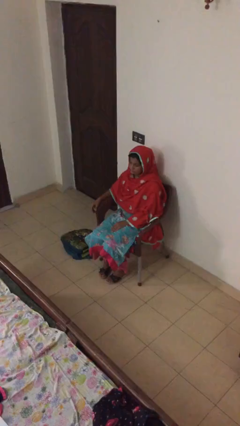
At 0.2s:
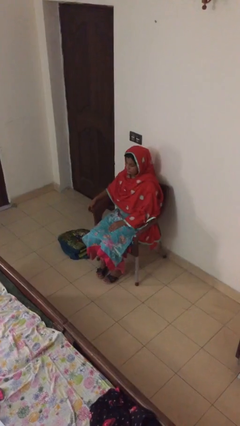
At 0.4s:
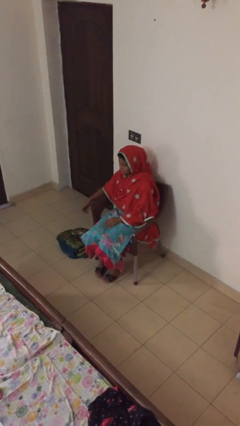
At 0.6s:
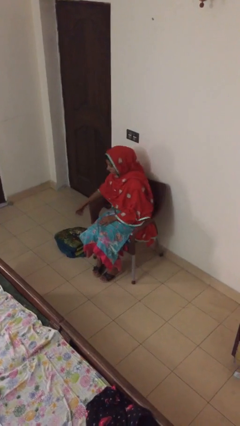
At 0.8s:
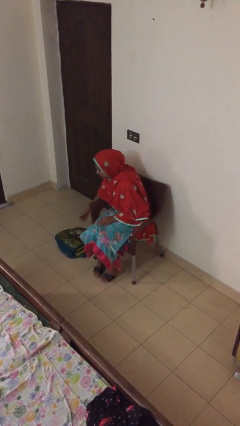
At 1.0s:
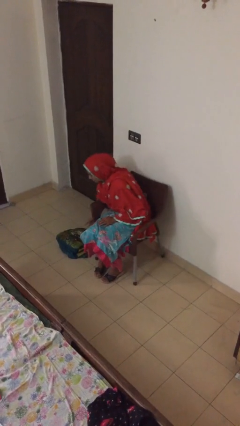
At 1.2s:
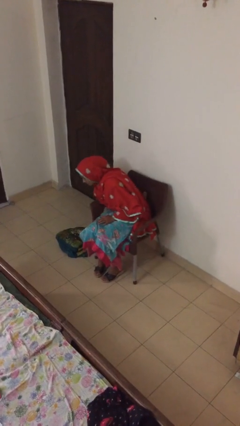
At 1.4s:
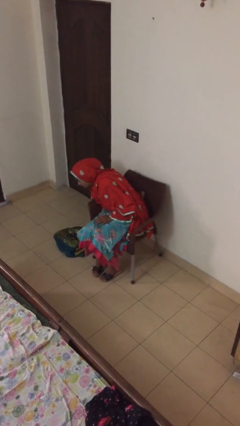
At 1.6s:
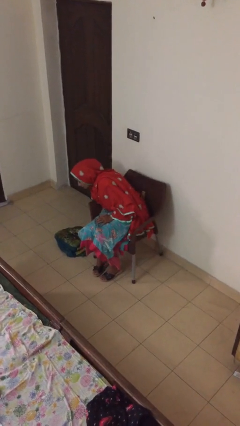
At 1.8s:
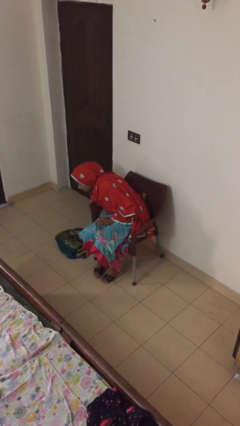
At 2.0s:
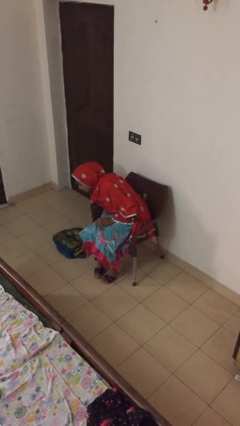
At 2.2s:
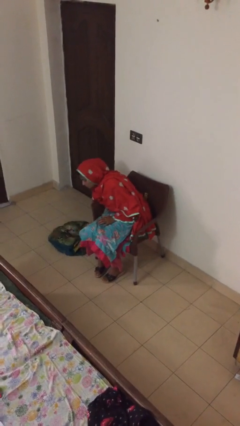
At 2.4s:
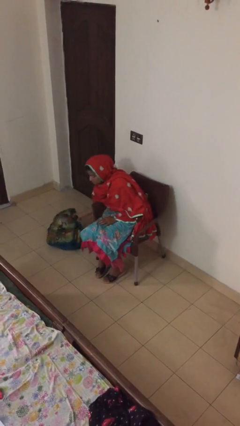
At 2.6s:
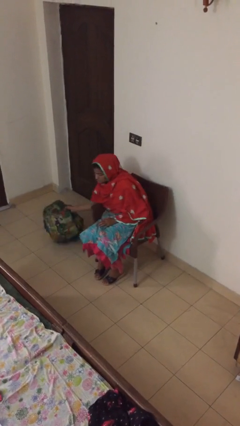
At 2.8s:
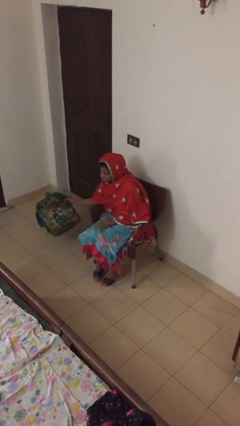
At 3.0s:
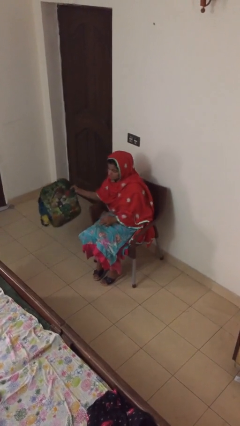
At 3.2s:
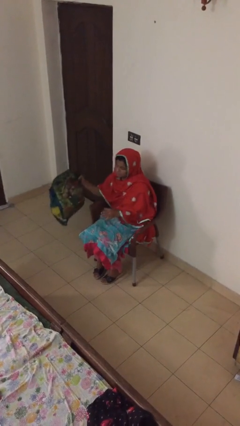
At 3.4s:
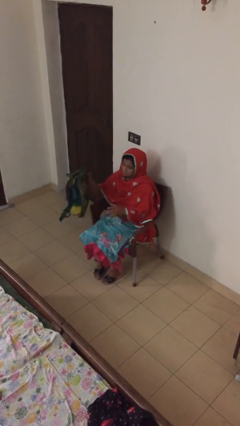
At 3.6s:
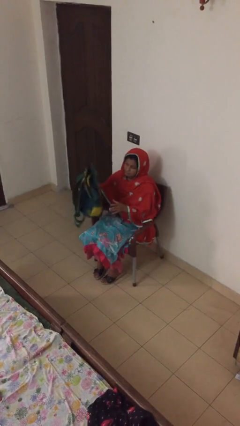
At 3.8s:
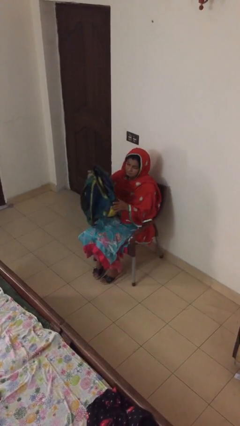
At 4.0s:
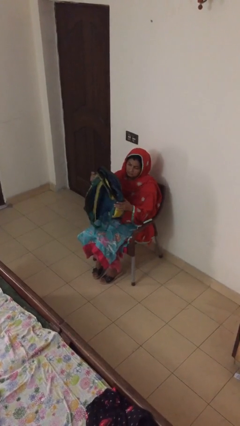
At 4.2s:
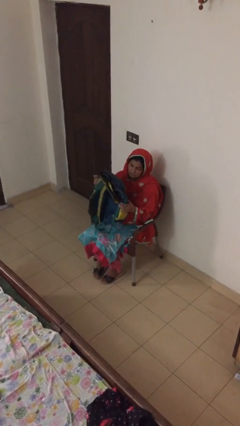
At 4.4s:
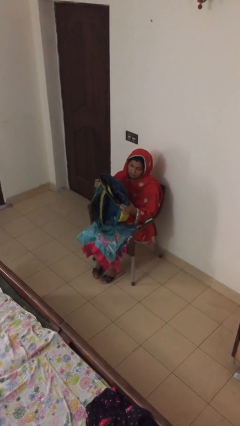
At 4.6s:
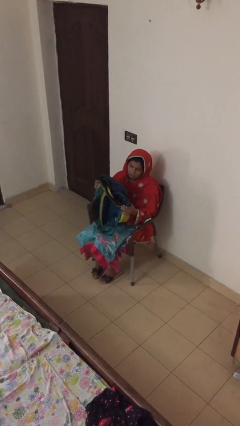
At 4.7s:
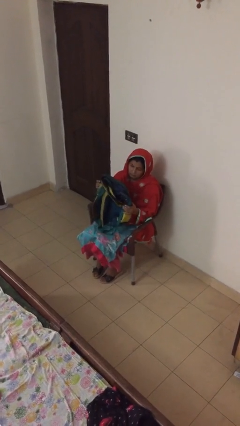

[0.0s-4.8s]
person picks up object from floor

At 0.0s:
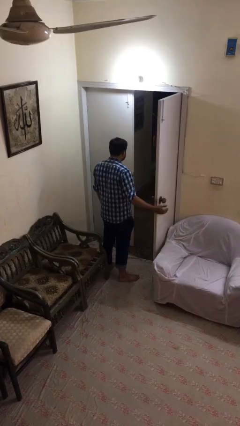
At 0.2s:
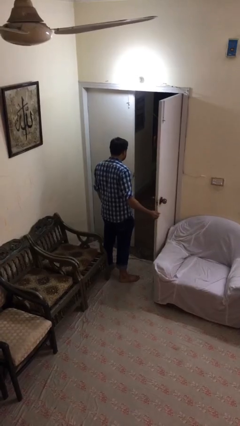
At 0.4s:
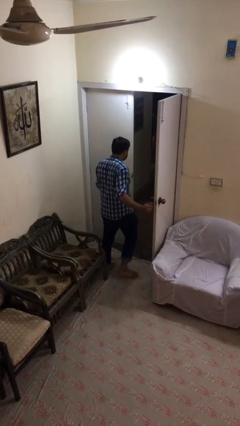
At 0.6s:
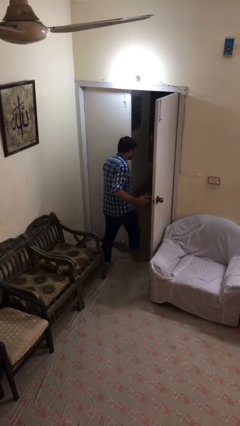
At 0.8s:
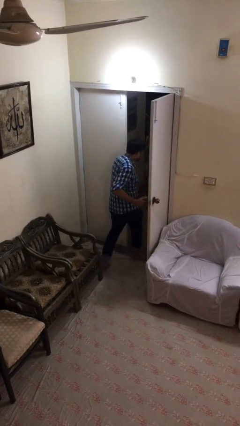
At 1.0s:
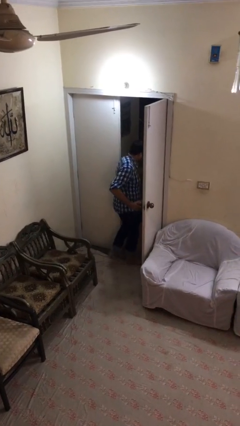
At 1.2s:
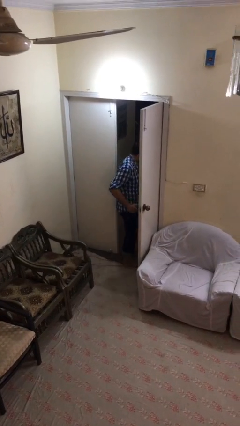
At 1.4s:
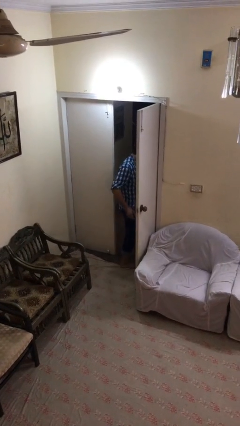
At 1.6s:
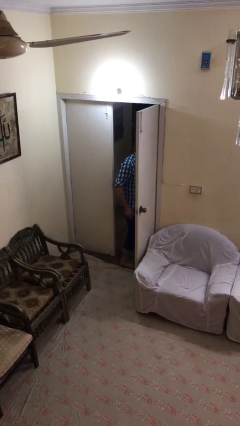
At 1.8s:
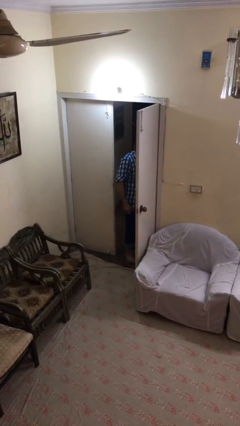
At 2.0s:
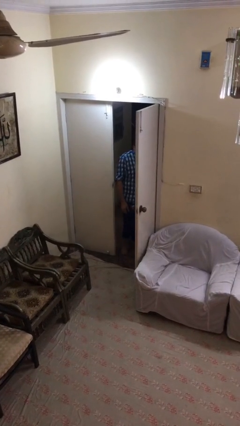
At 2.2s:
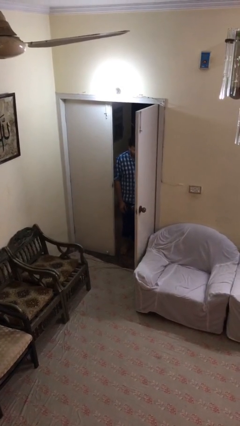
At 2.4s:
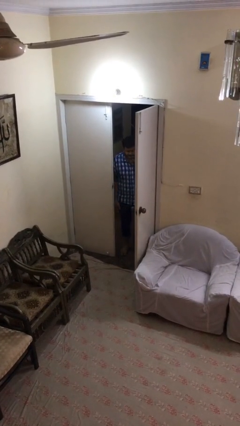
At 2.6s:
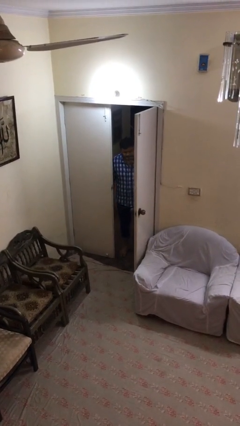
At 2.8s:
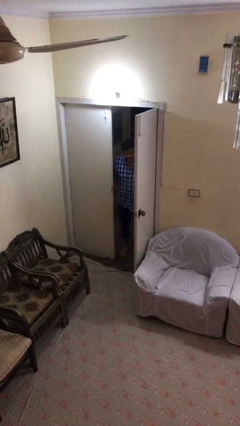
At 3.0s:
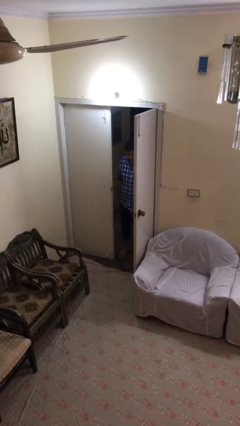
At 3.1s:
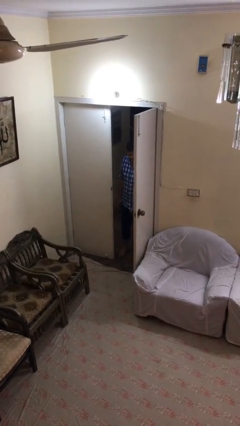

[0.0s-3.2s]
person exits scene through structure

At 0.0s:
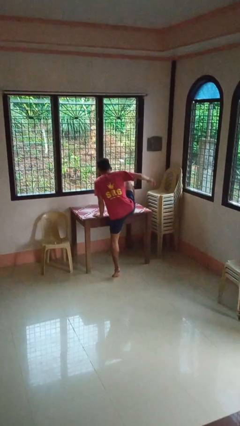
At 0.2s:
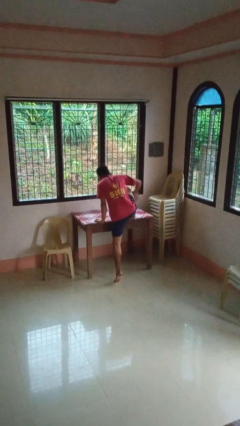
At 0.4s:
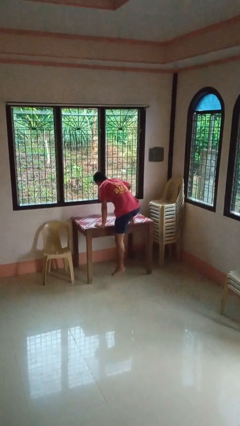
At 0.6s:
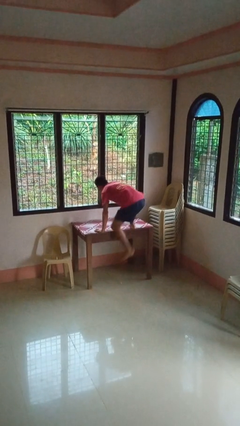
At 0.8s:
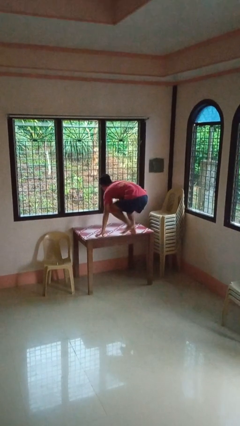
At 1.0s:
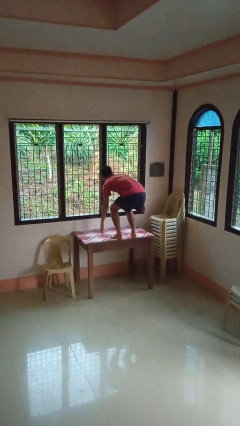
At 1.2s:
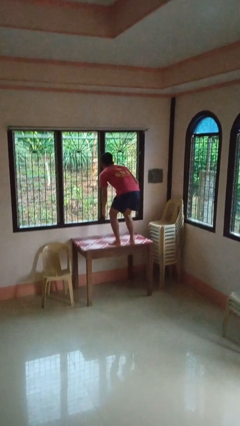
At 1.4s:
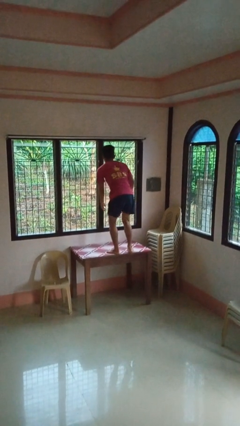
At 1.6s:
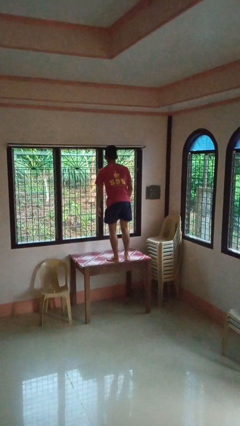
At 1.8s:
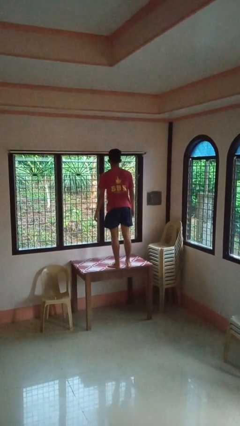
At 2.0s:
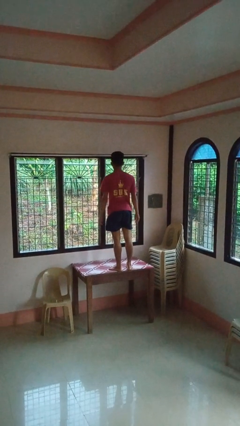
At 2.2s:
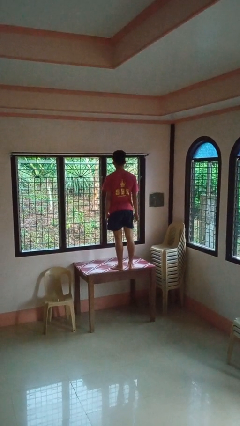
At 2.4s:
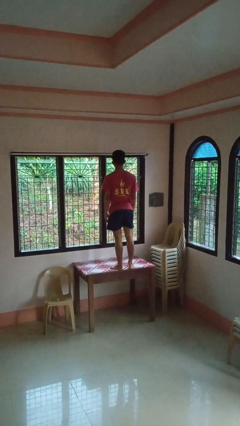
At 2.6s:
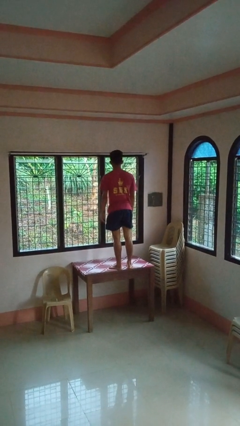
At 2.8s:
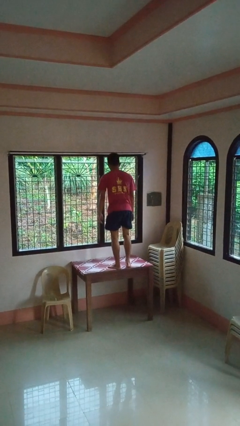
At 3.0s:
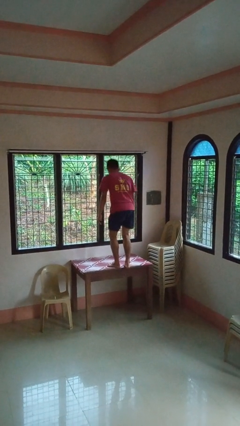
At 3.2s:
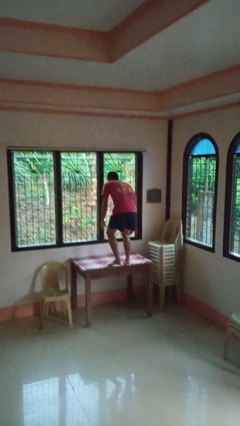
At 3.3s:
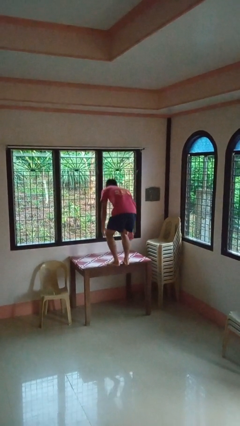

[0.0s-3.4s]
person climbs on table

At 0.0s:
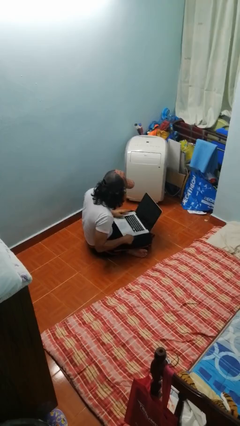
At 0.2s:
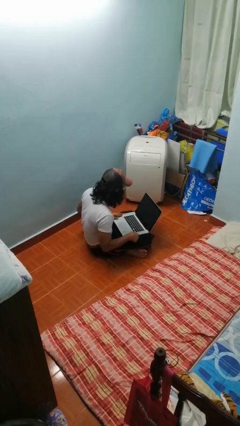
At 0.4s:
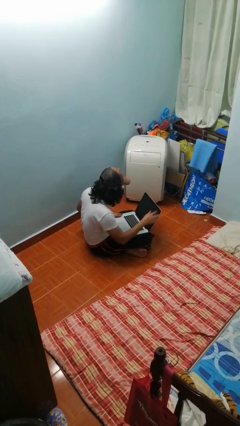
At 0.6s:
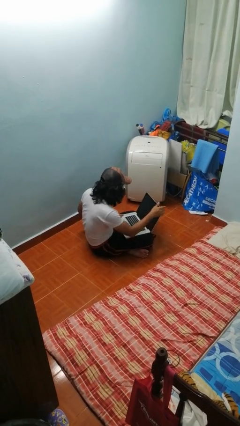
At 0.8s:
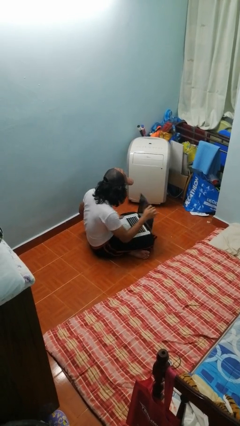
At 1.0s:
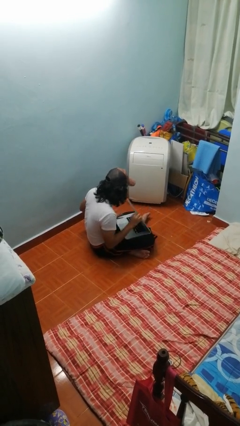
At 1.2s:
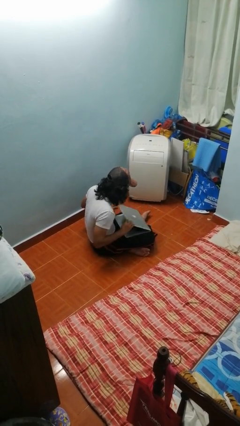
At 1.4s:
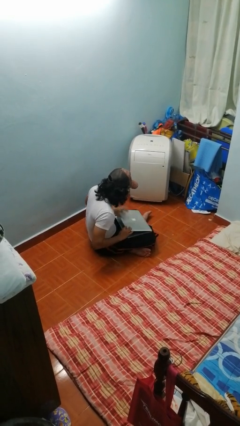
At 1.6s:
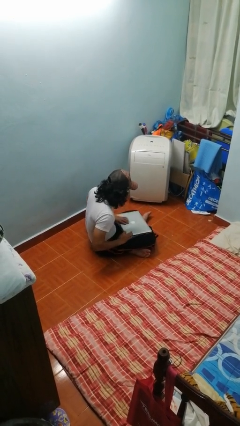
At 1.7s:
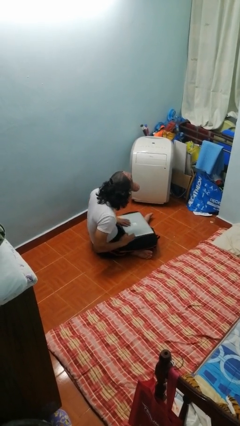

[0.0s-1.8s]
person closes laptop

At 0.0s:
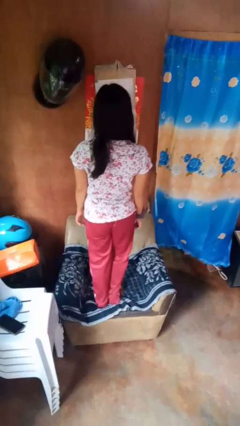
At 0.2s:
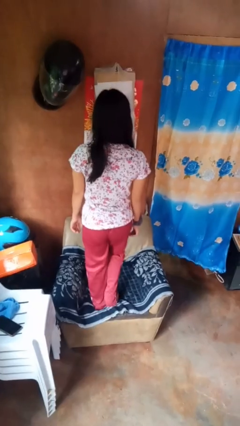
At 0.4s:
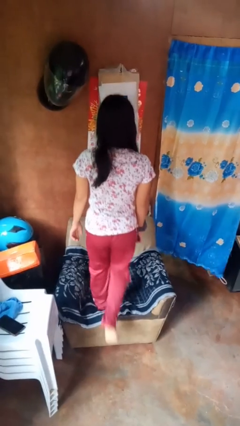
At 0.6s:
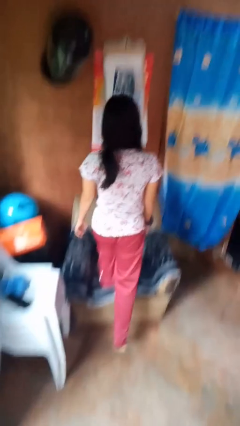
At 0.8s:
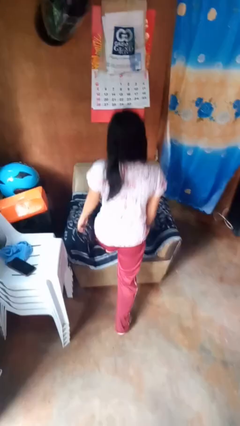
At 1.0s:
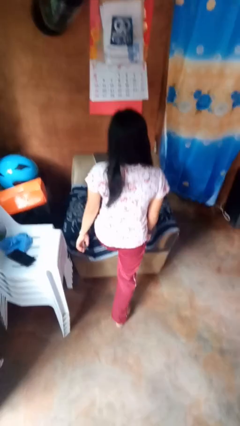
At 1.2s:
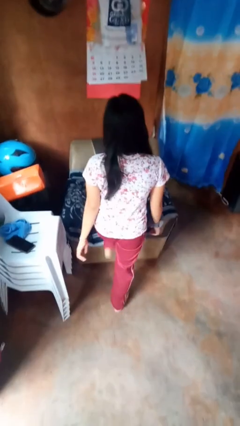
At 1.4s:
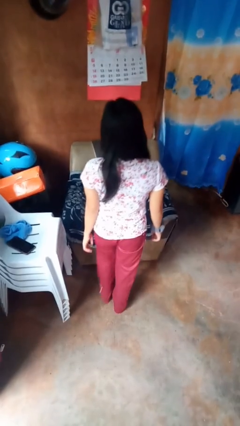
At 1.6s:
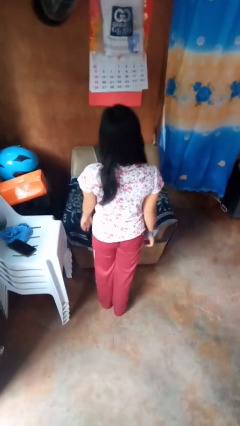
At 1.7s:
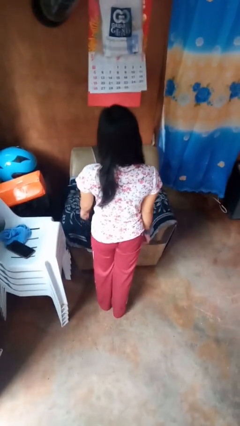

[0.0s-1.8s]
person climbs off couch

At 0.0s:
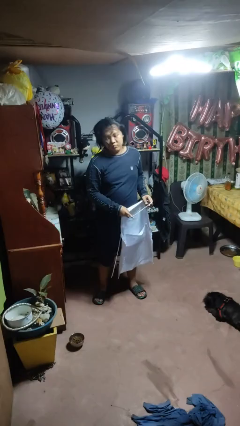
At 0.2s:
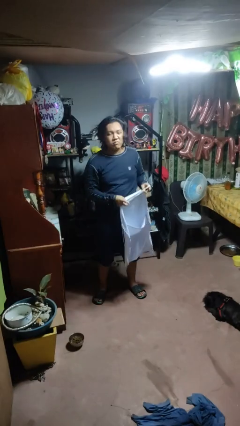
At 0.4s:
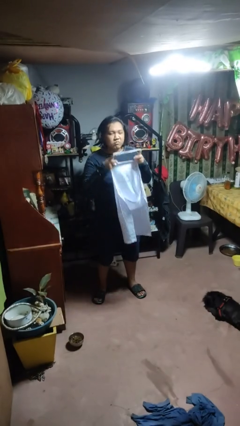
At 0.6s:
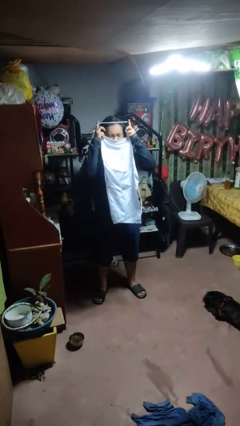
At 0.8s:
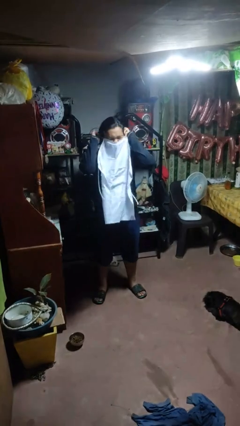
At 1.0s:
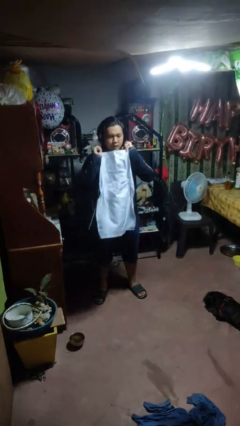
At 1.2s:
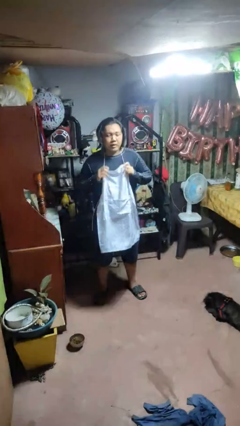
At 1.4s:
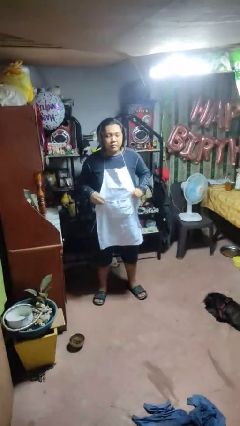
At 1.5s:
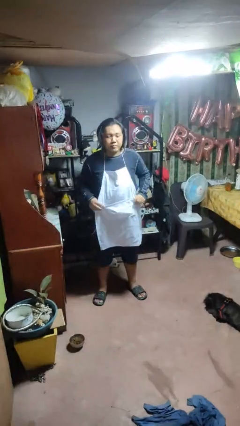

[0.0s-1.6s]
person puts on apron

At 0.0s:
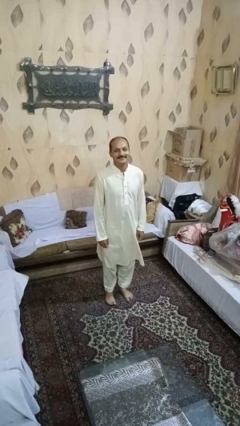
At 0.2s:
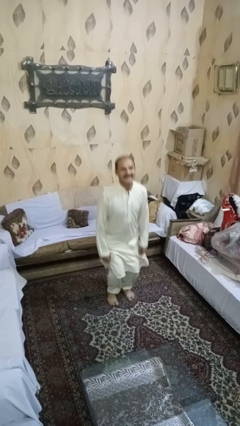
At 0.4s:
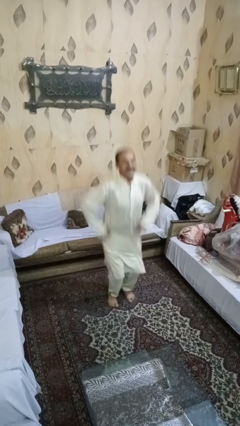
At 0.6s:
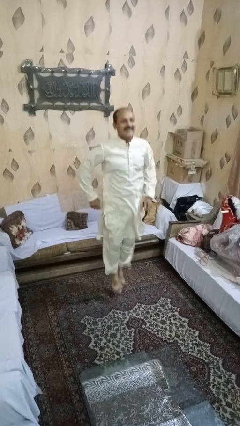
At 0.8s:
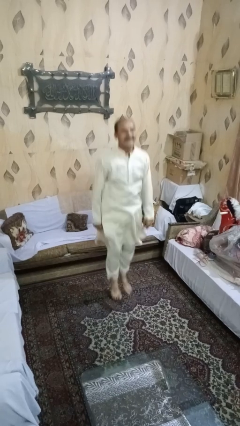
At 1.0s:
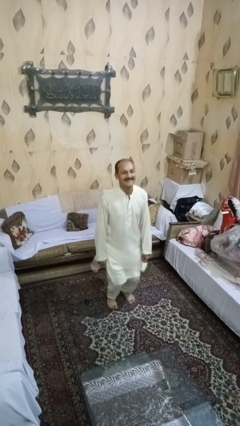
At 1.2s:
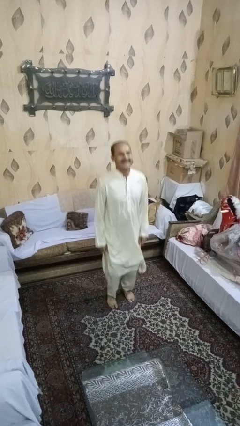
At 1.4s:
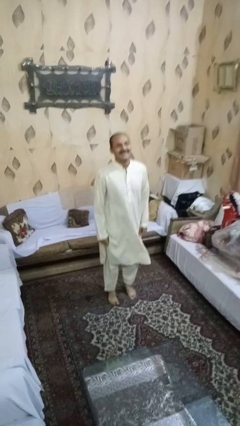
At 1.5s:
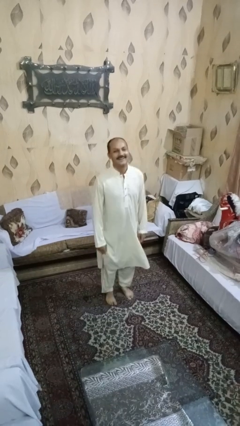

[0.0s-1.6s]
person jumps
